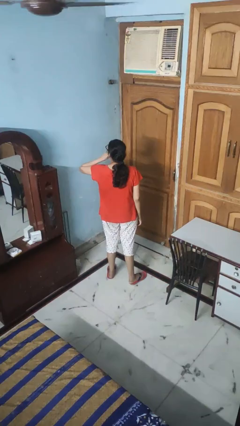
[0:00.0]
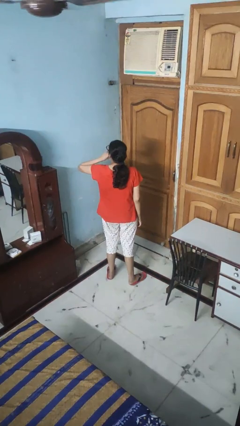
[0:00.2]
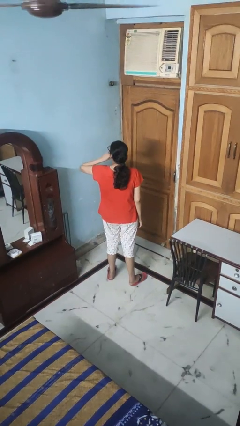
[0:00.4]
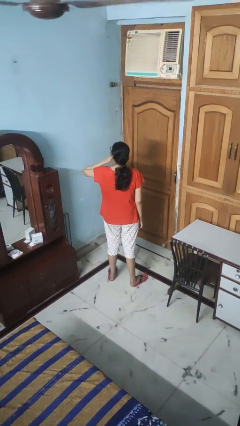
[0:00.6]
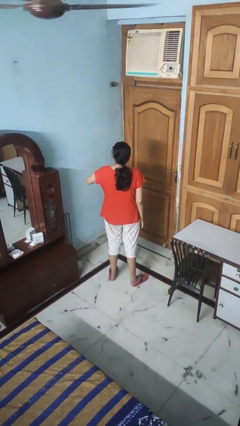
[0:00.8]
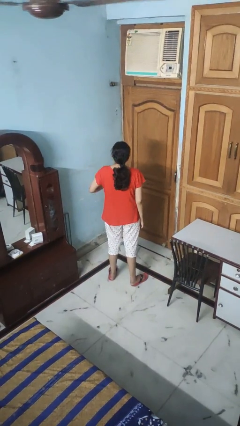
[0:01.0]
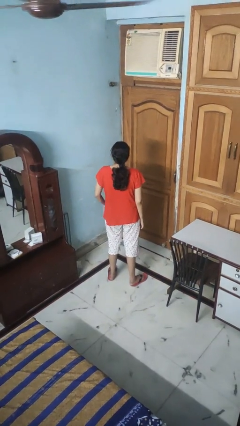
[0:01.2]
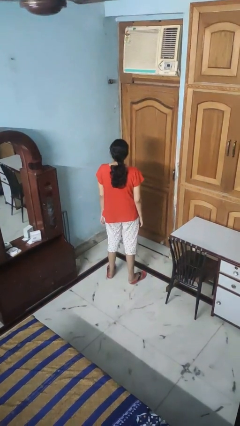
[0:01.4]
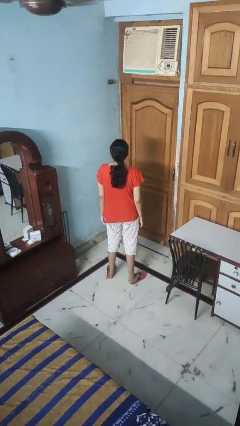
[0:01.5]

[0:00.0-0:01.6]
person gestures be quiet

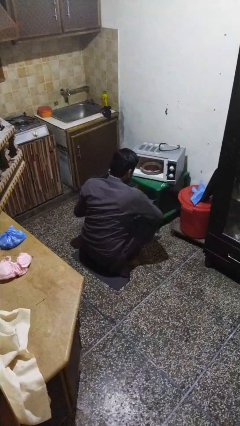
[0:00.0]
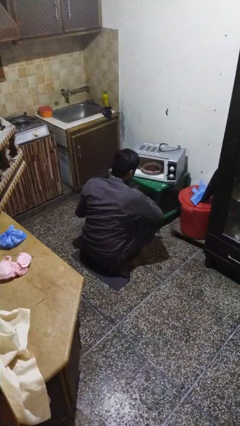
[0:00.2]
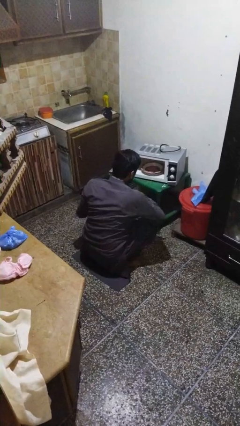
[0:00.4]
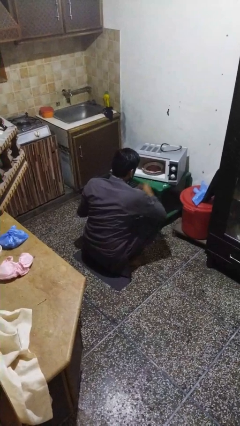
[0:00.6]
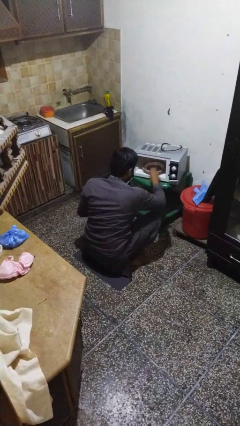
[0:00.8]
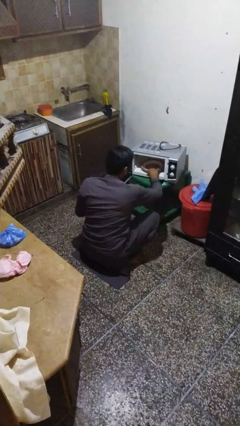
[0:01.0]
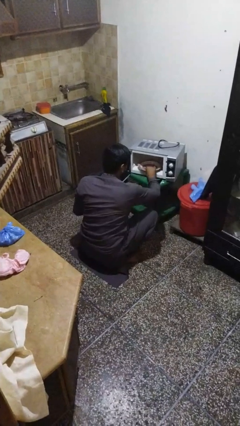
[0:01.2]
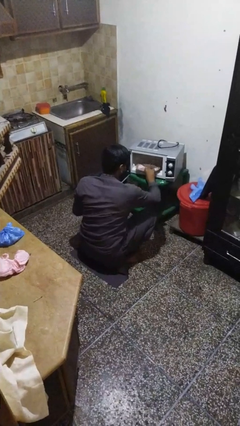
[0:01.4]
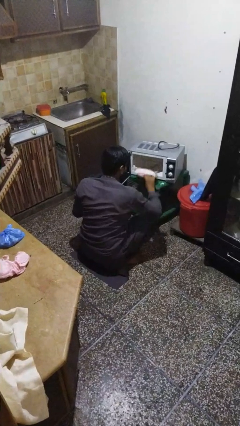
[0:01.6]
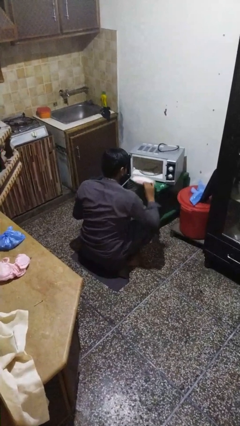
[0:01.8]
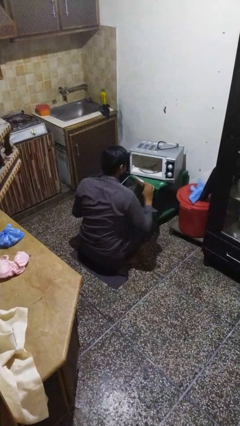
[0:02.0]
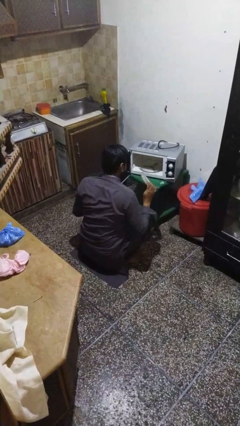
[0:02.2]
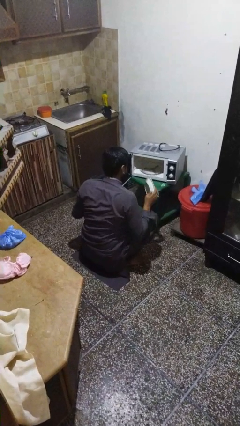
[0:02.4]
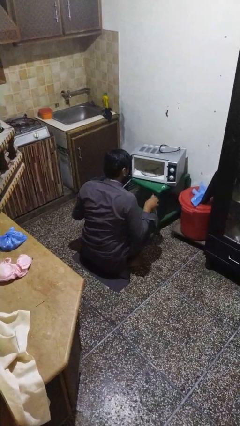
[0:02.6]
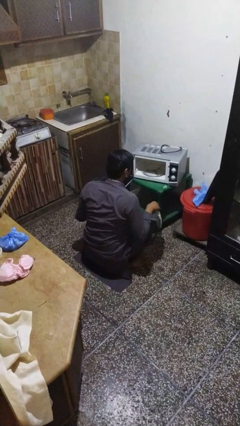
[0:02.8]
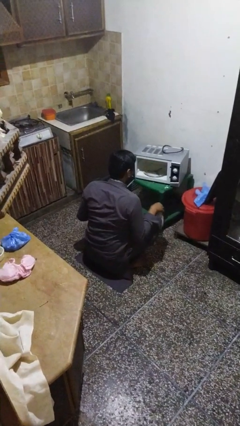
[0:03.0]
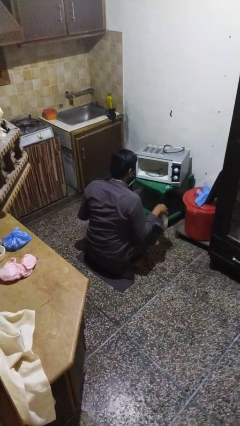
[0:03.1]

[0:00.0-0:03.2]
person takes object from microwave

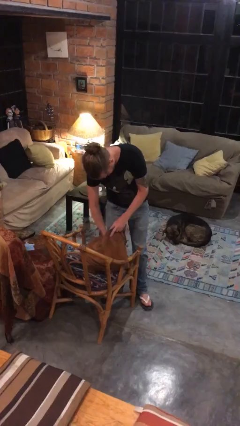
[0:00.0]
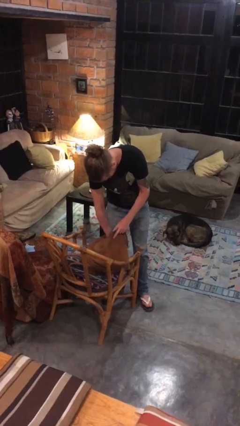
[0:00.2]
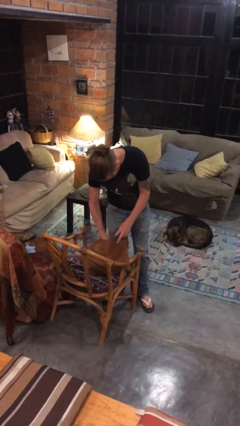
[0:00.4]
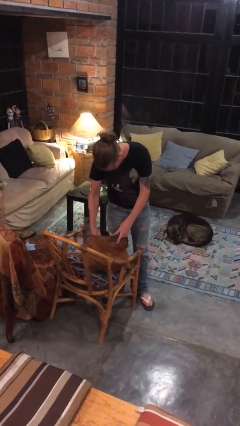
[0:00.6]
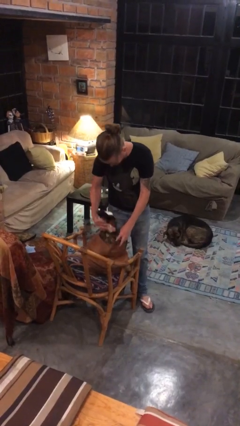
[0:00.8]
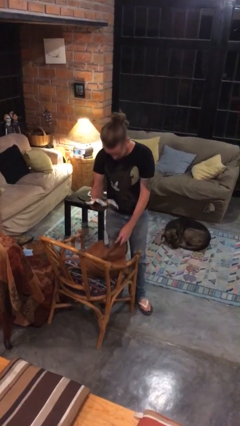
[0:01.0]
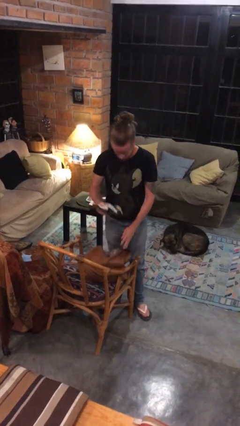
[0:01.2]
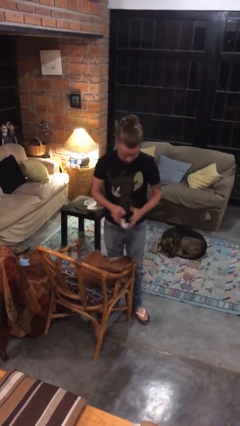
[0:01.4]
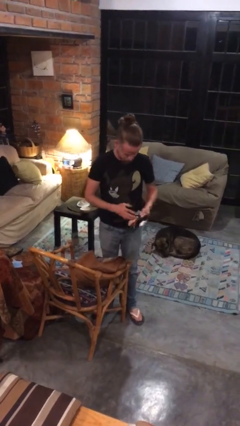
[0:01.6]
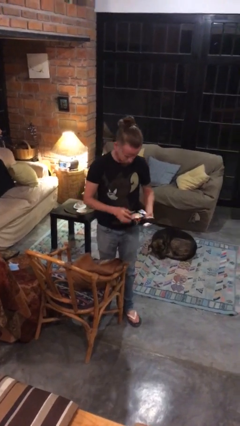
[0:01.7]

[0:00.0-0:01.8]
person takes object from purse

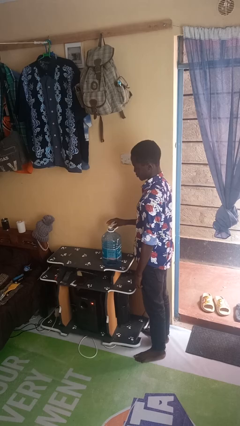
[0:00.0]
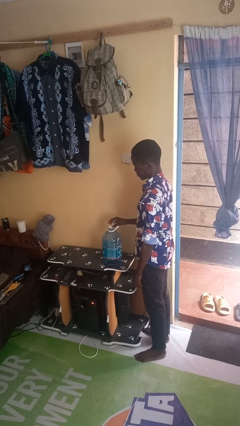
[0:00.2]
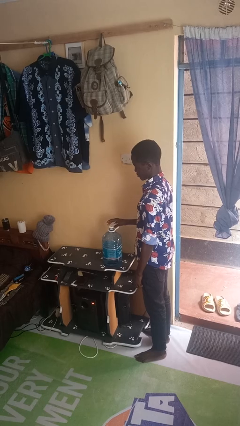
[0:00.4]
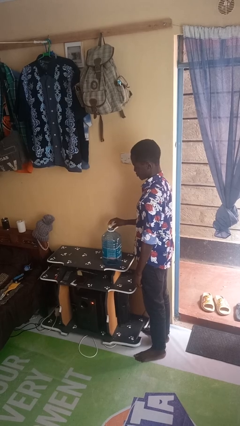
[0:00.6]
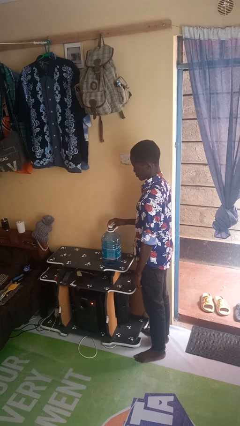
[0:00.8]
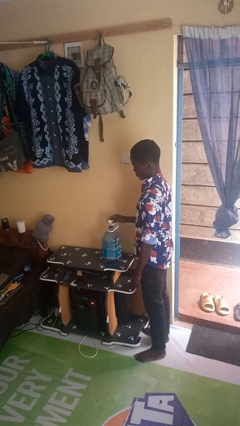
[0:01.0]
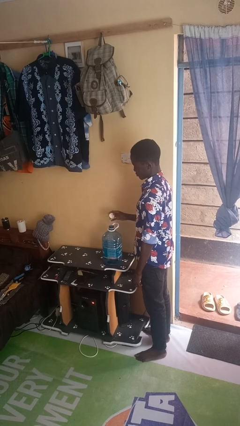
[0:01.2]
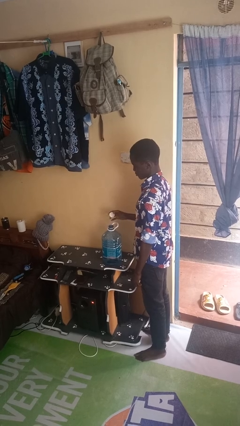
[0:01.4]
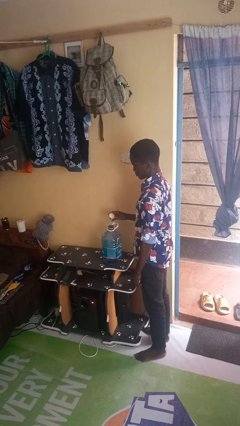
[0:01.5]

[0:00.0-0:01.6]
person unscrews lid from bottle

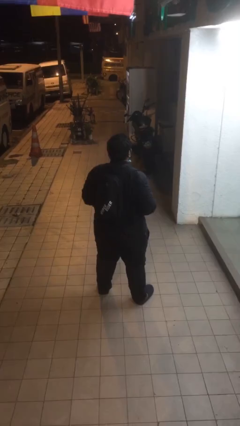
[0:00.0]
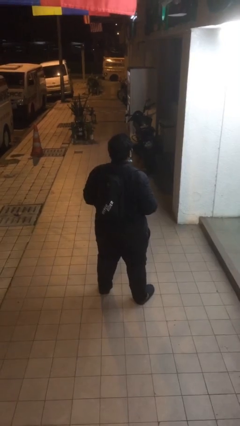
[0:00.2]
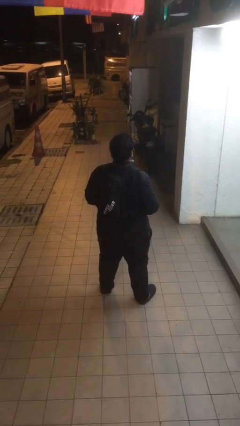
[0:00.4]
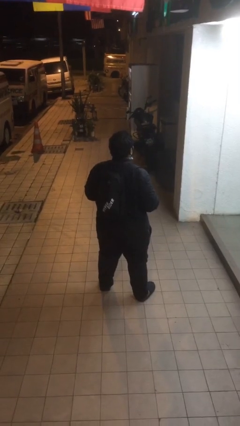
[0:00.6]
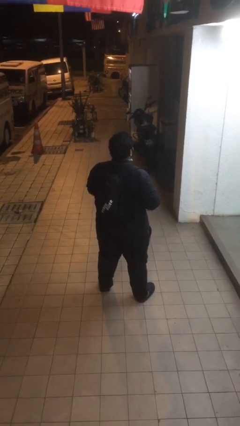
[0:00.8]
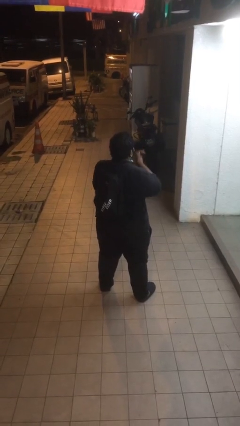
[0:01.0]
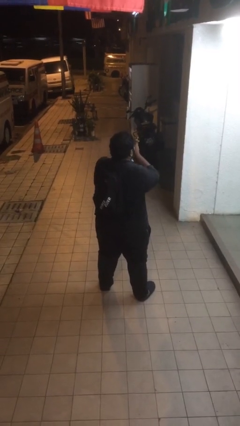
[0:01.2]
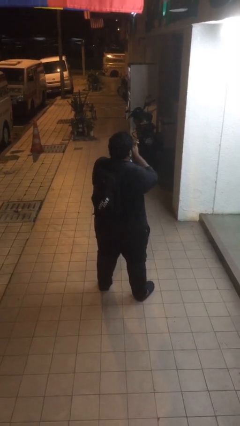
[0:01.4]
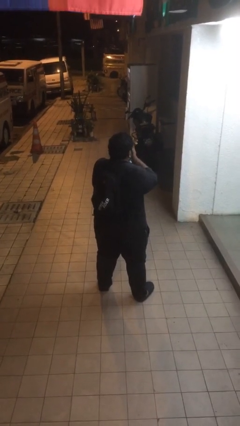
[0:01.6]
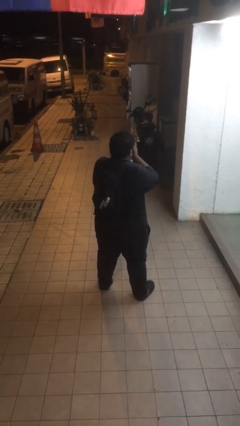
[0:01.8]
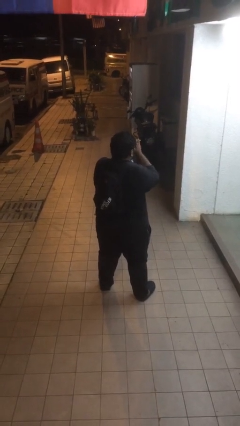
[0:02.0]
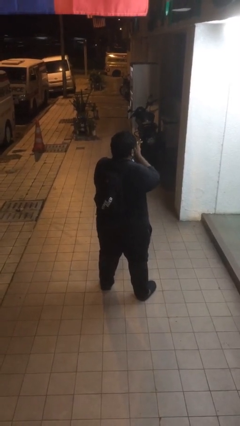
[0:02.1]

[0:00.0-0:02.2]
person blows into hands

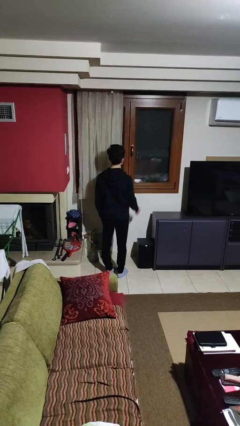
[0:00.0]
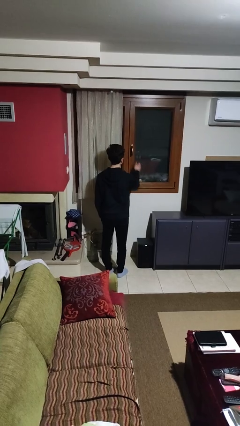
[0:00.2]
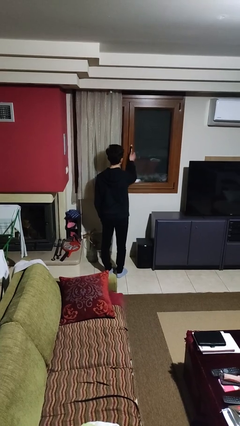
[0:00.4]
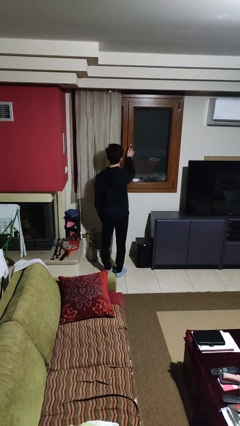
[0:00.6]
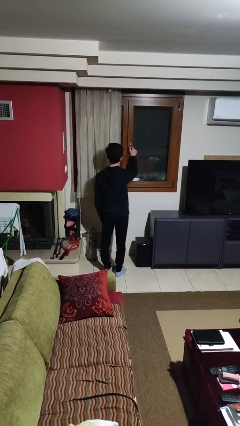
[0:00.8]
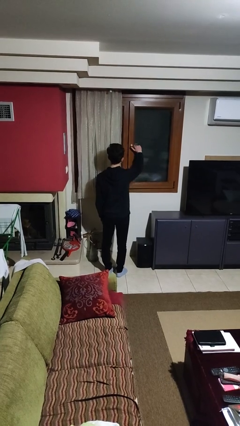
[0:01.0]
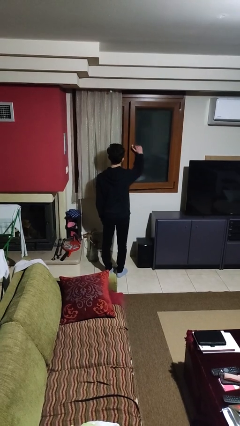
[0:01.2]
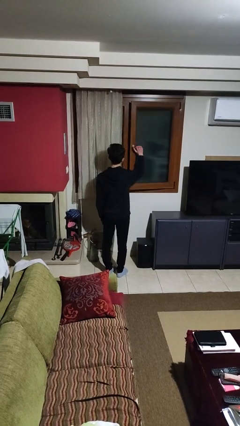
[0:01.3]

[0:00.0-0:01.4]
person opens home window

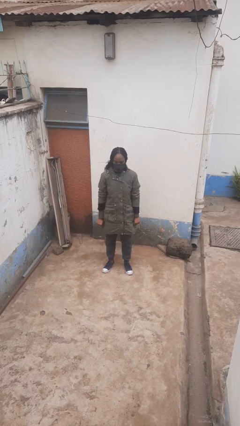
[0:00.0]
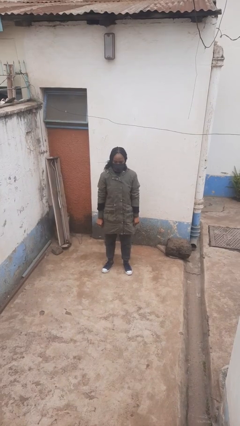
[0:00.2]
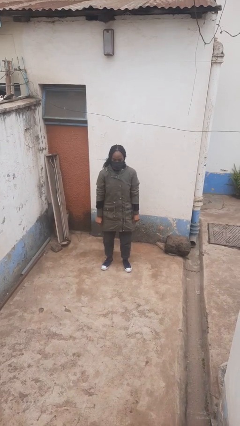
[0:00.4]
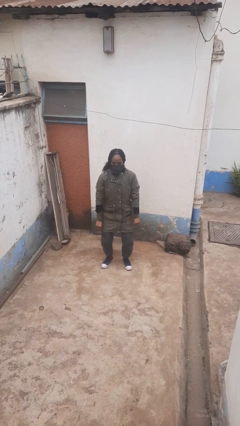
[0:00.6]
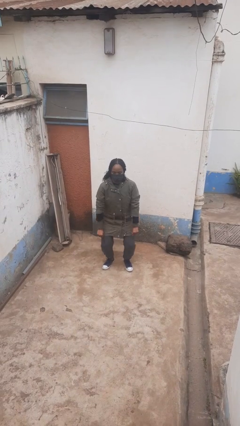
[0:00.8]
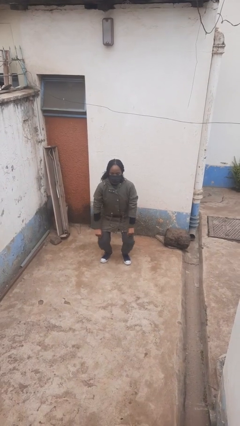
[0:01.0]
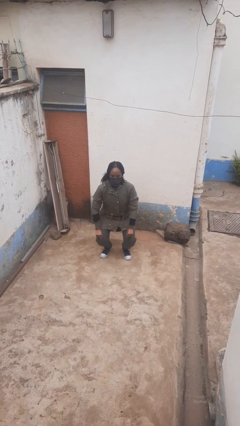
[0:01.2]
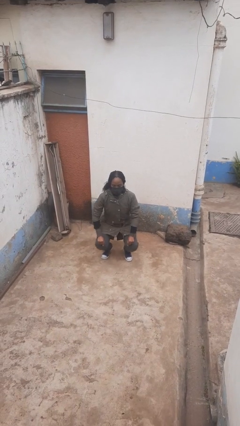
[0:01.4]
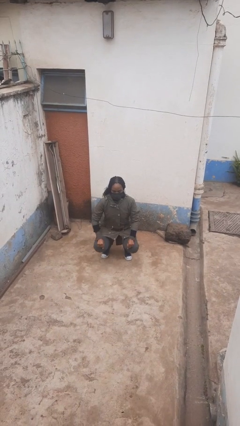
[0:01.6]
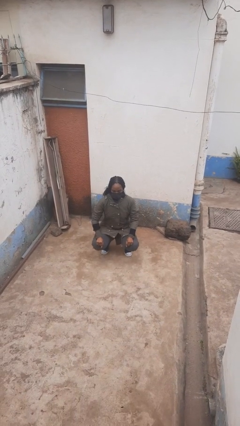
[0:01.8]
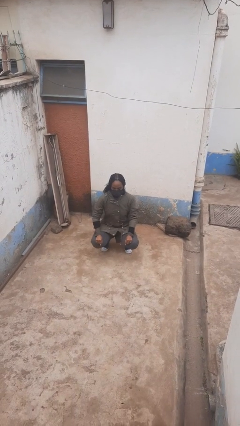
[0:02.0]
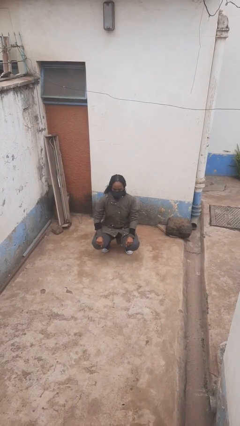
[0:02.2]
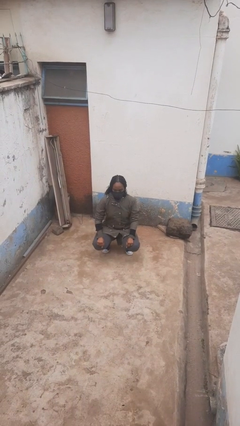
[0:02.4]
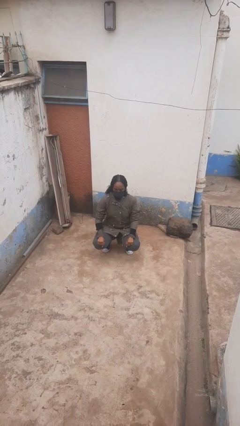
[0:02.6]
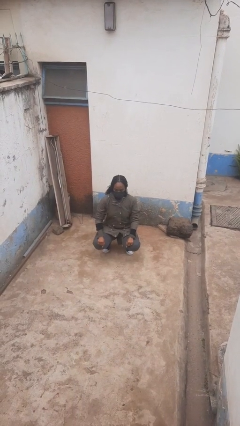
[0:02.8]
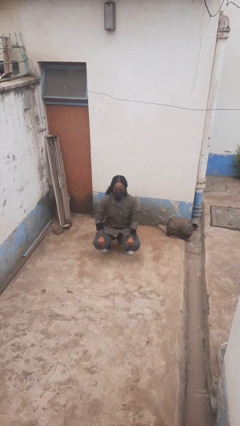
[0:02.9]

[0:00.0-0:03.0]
person squats

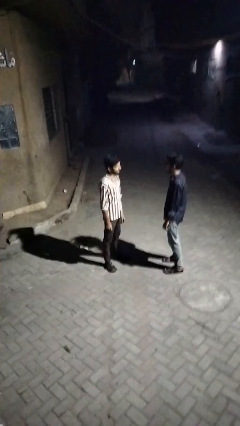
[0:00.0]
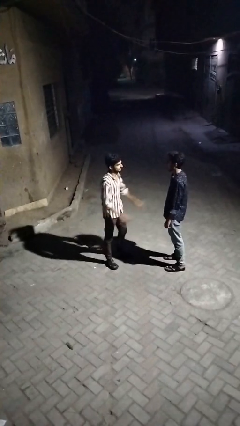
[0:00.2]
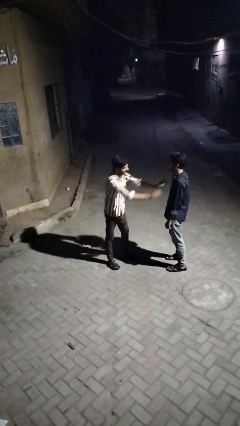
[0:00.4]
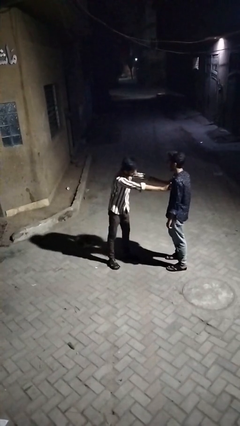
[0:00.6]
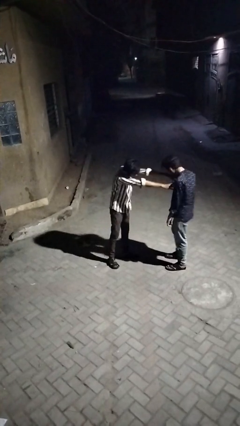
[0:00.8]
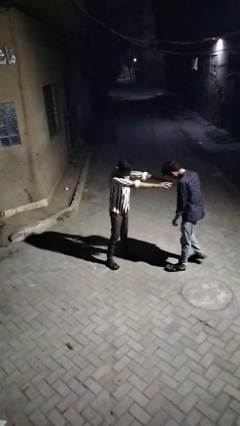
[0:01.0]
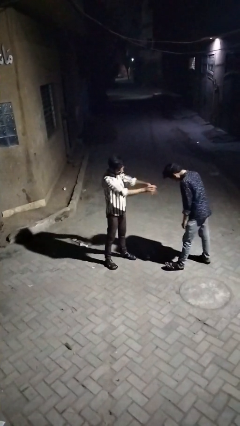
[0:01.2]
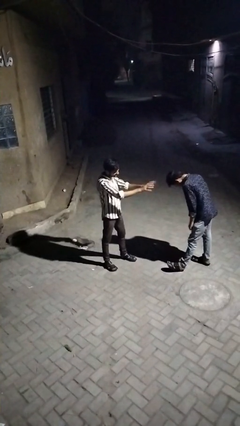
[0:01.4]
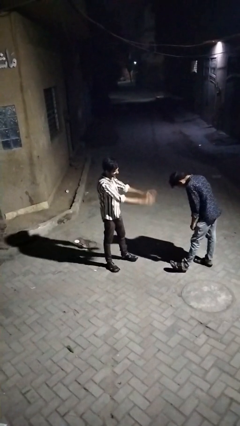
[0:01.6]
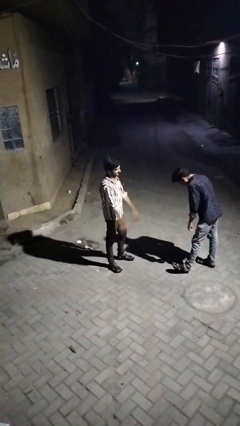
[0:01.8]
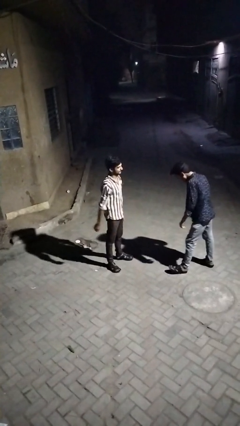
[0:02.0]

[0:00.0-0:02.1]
person shoves person
